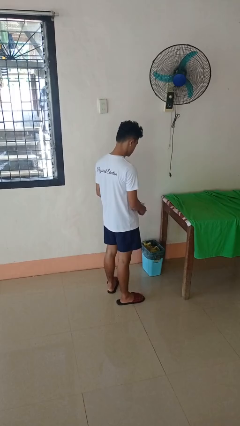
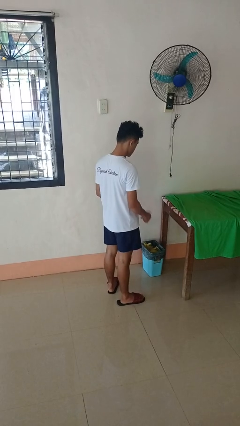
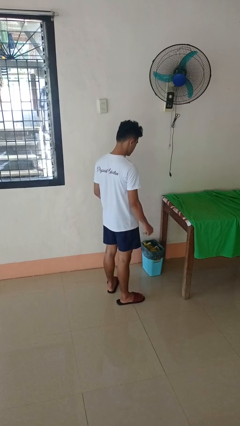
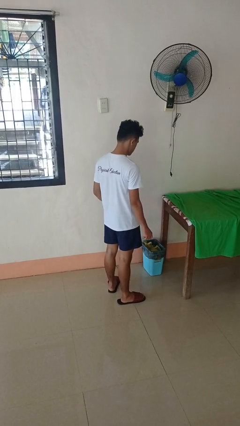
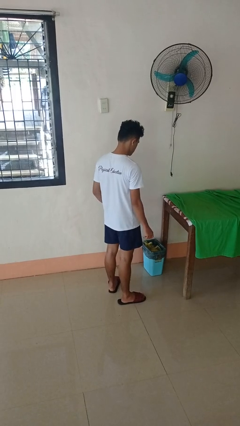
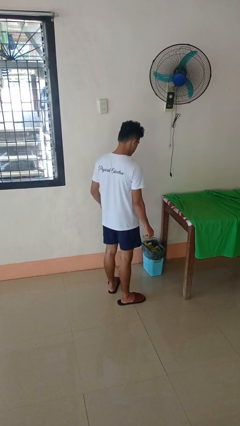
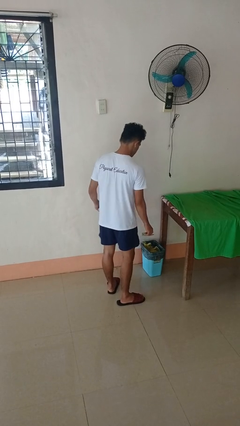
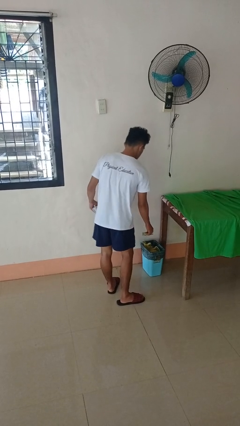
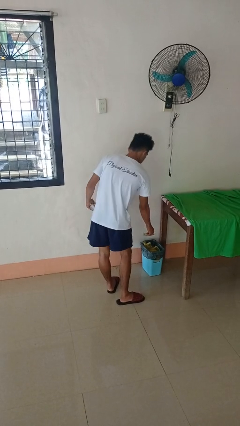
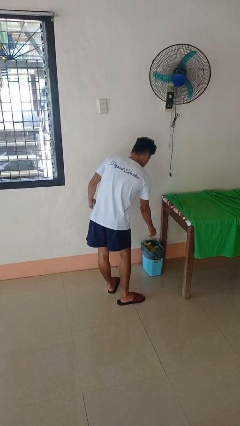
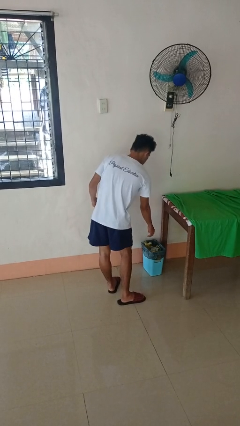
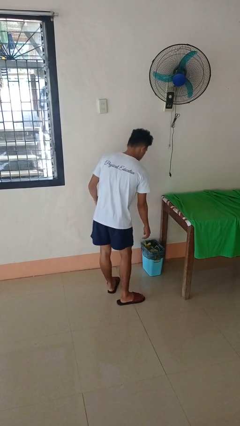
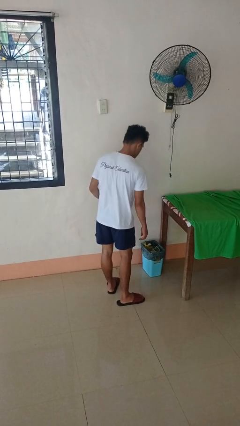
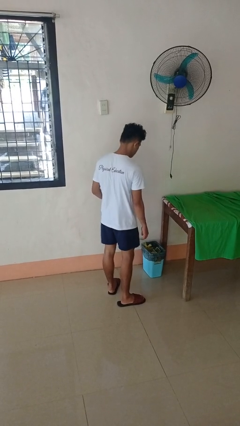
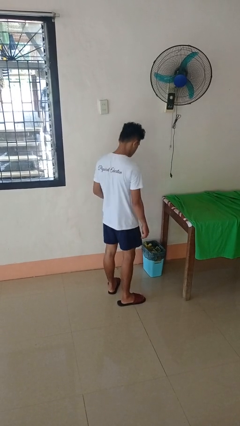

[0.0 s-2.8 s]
person discards trash

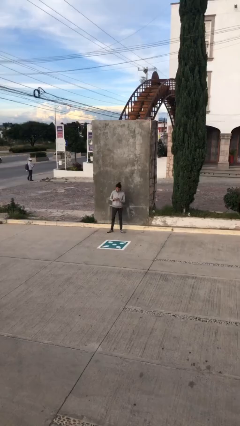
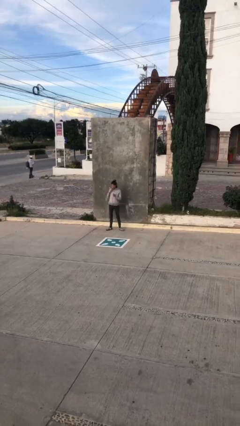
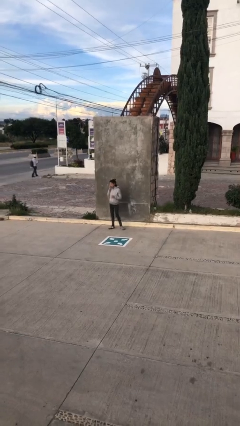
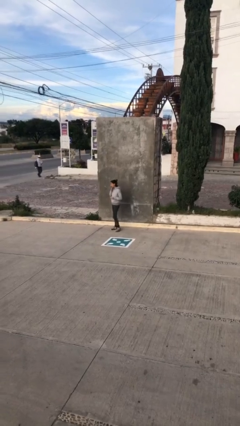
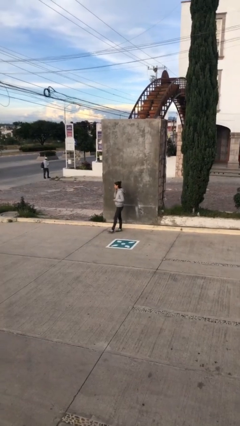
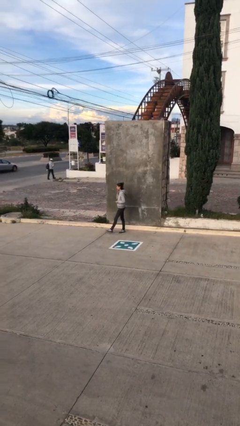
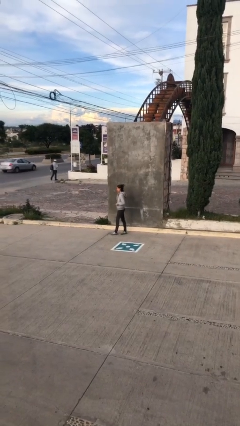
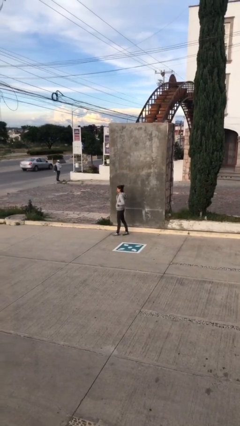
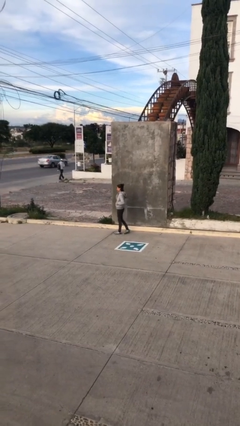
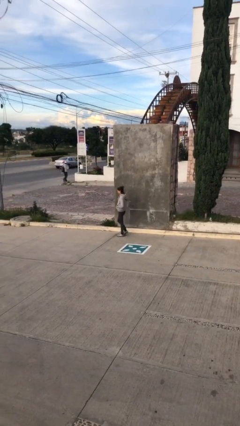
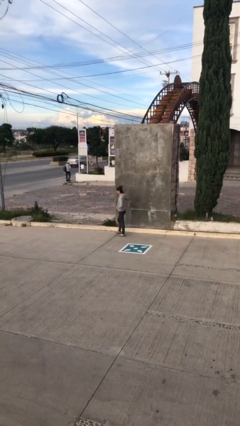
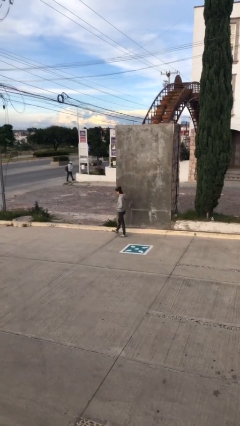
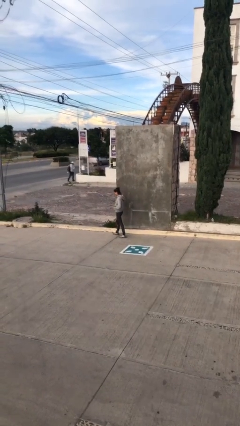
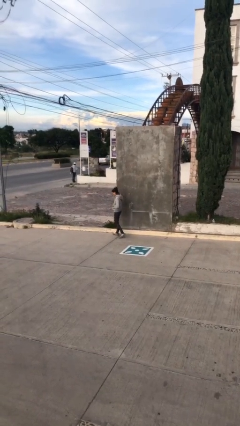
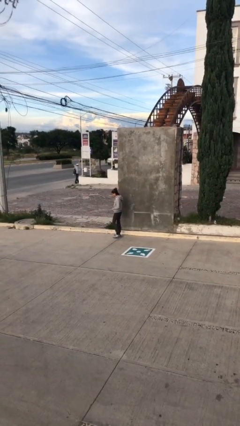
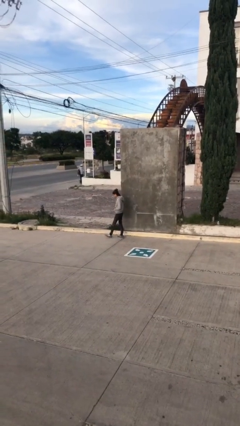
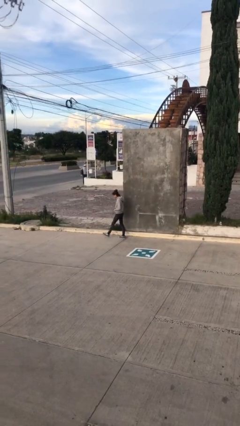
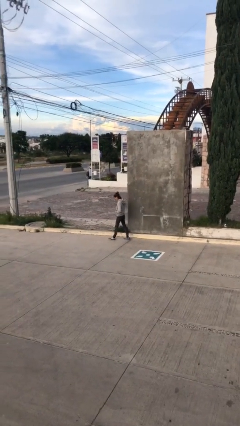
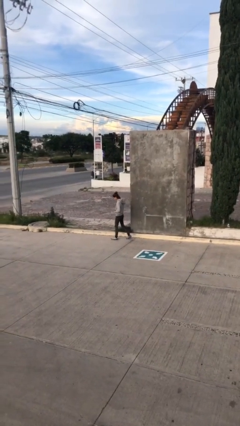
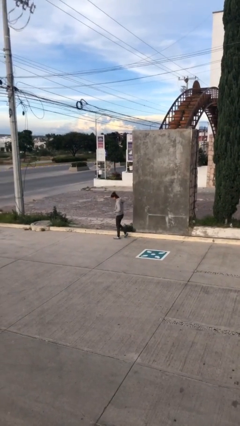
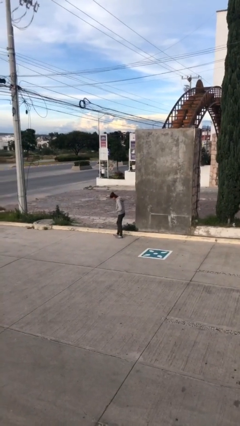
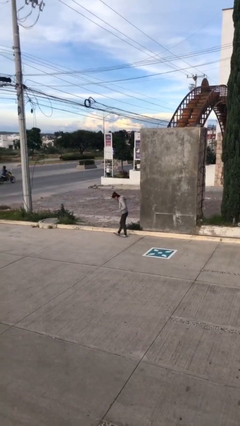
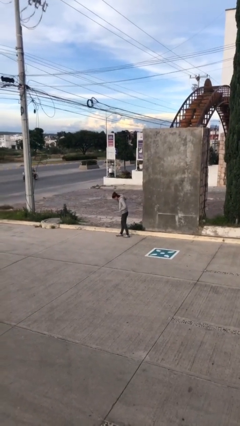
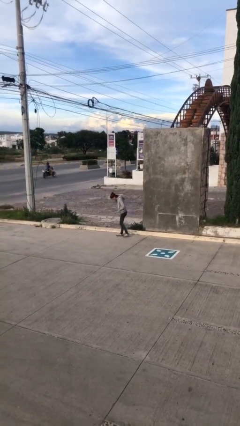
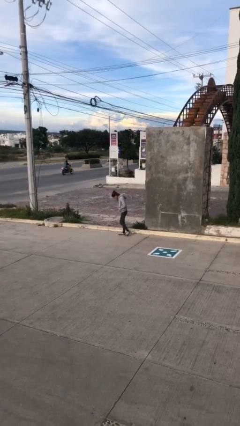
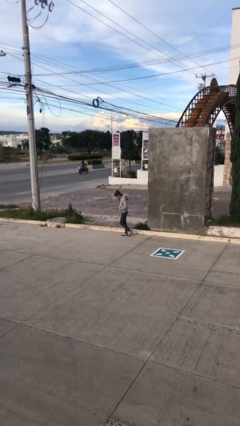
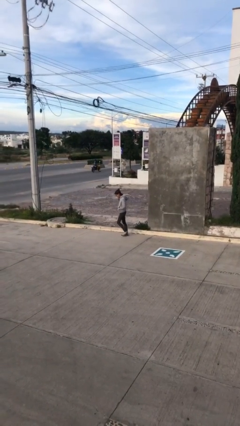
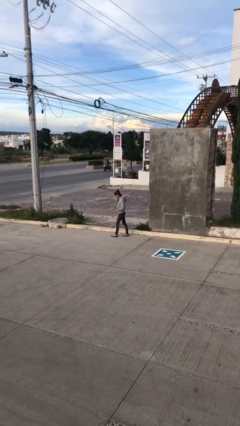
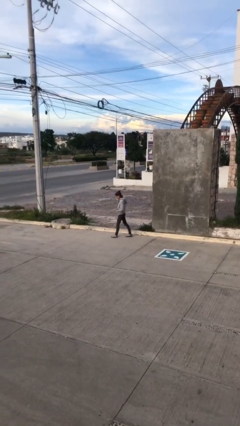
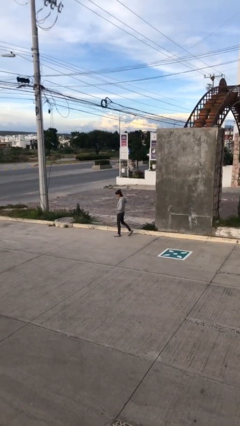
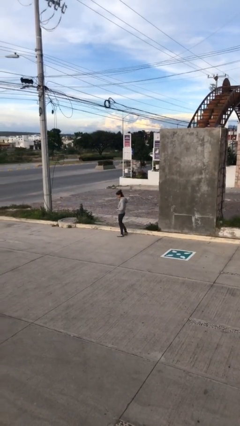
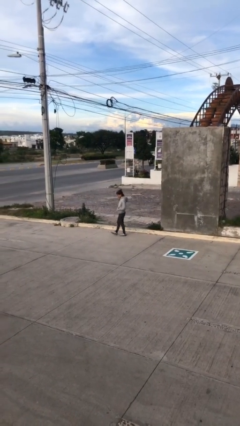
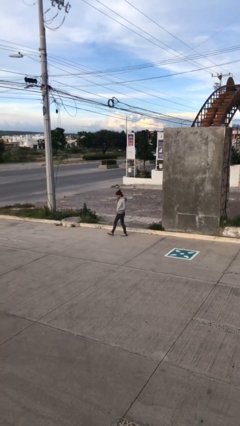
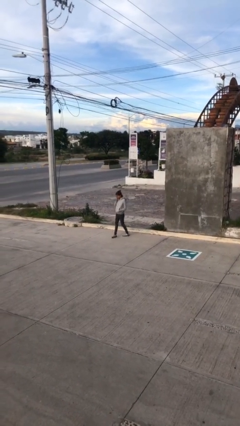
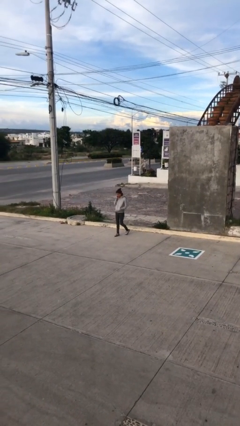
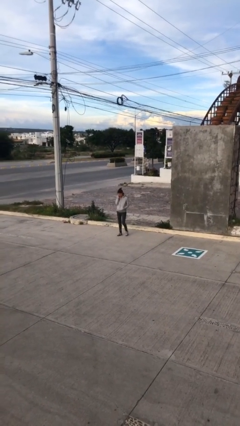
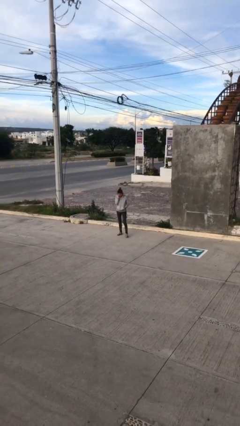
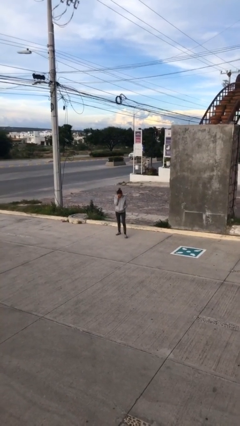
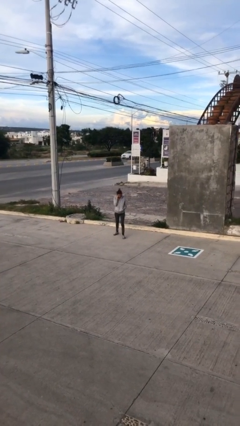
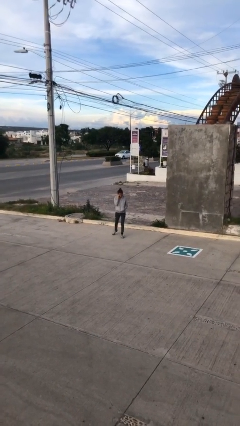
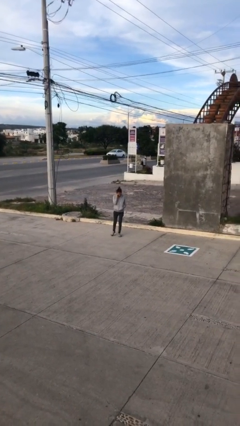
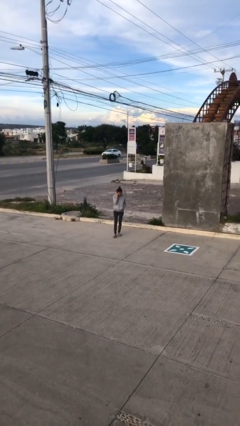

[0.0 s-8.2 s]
person talks on phone

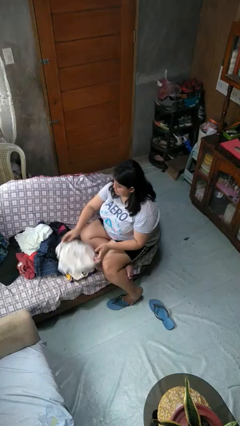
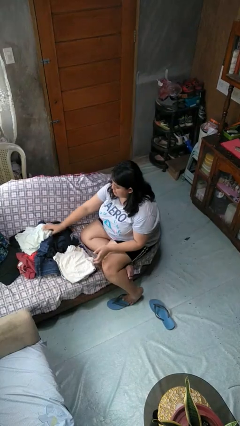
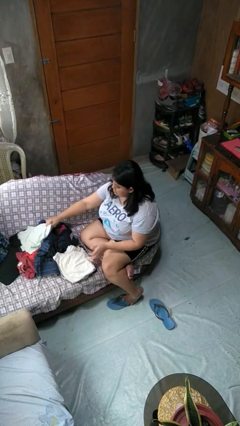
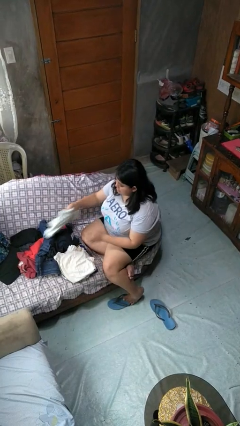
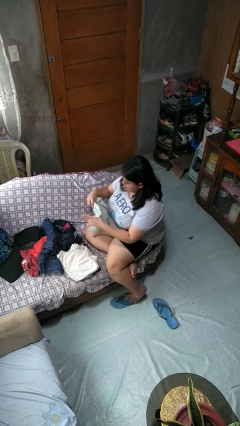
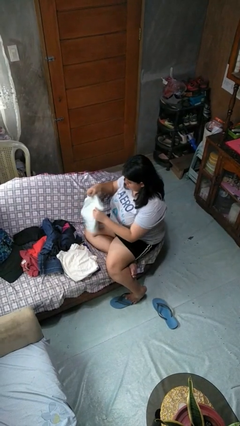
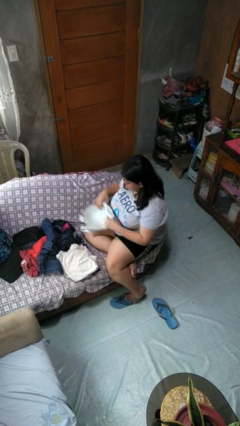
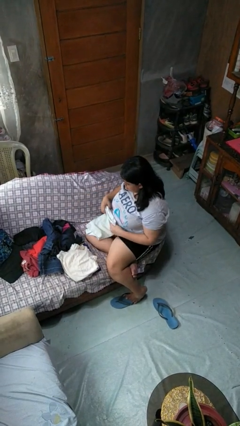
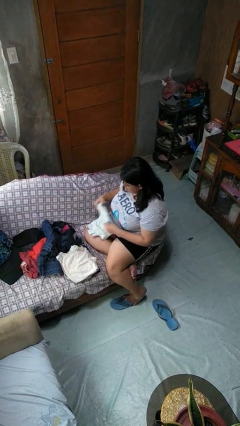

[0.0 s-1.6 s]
person folds shirt

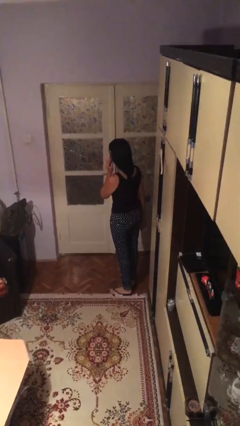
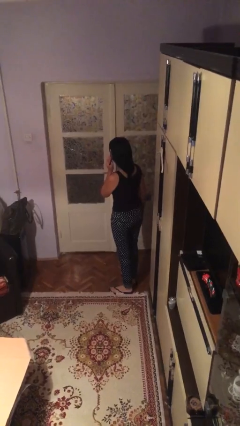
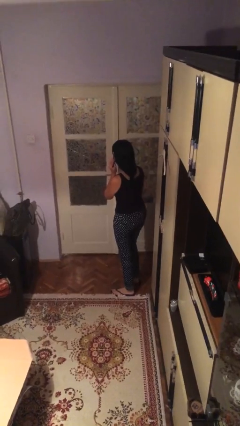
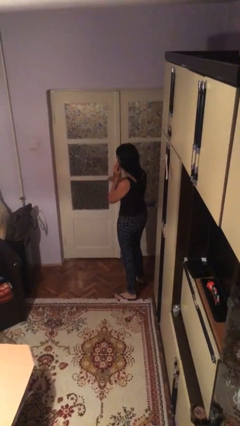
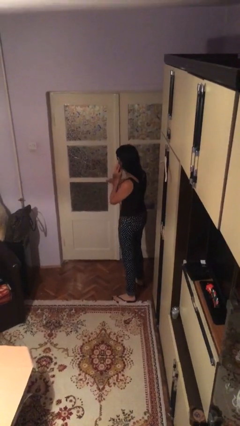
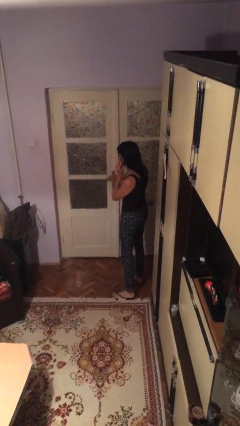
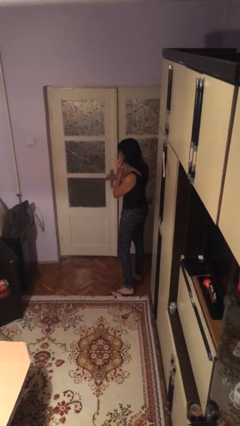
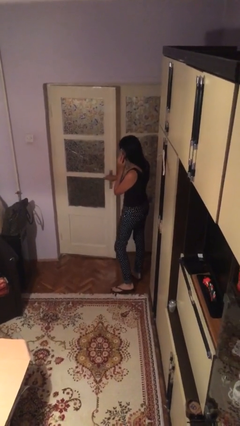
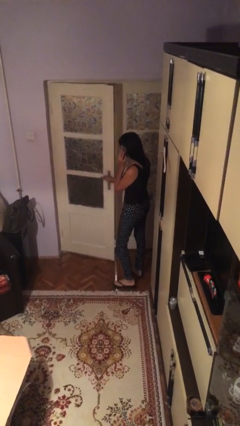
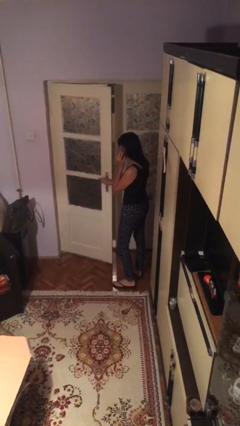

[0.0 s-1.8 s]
person opens facility door

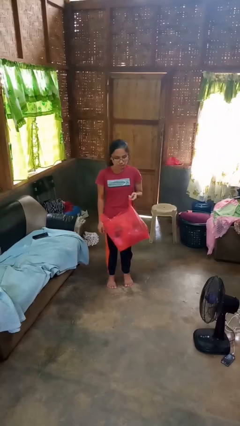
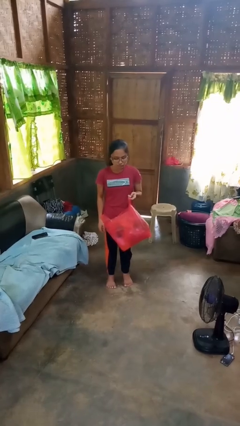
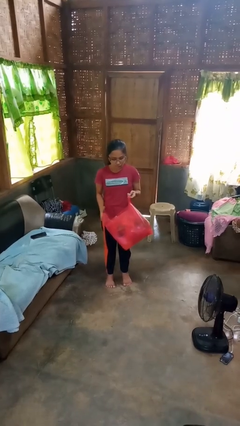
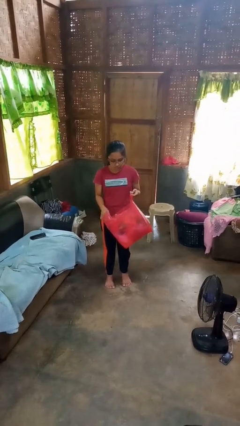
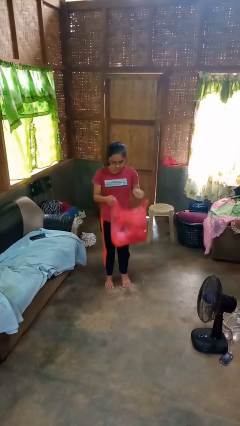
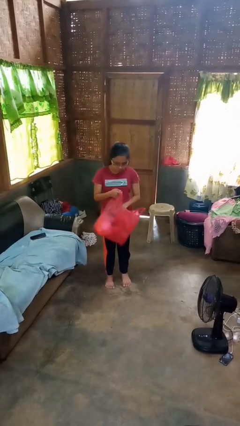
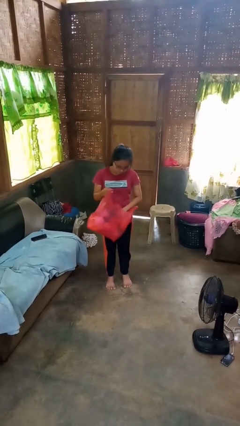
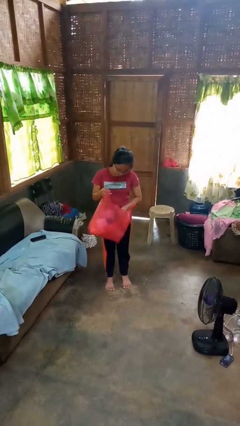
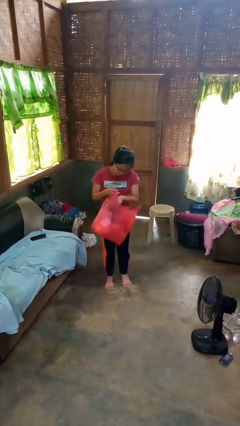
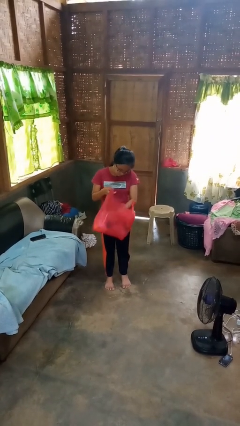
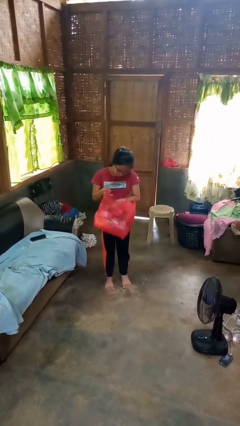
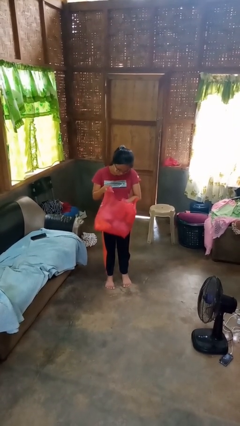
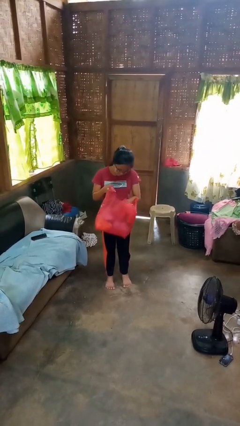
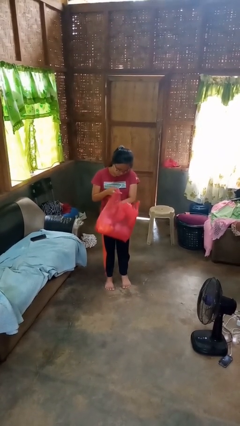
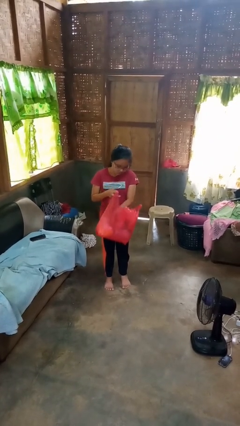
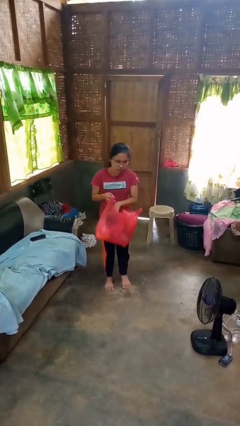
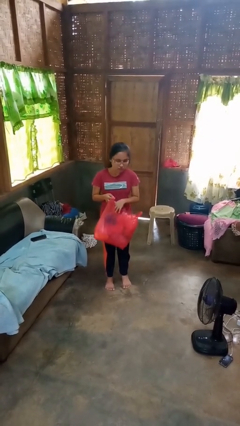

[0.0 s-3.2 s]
person searches in bag
